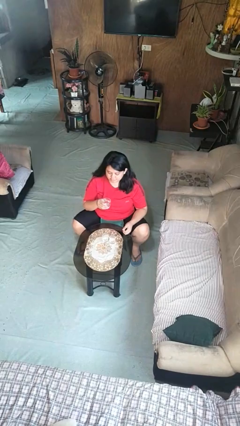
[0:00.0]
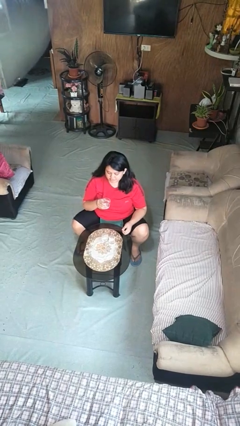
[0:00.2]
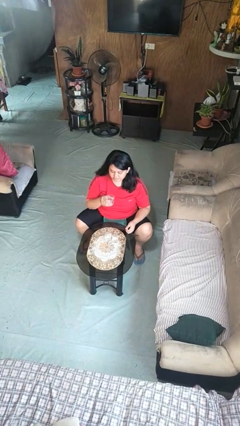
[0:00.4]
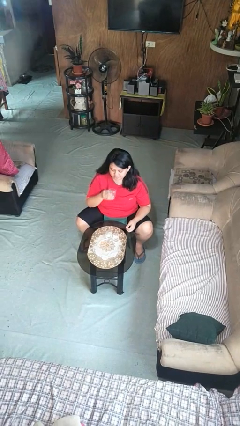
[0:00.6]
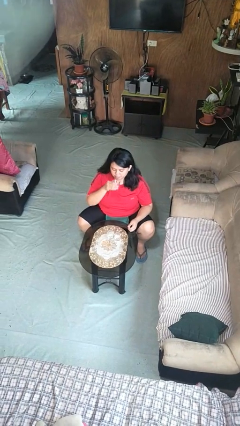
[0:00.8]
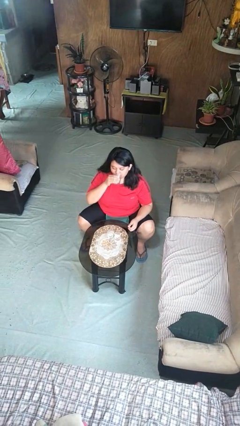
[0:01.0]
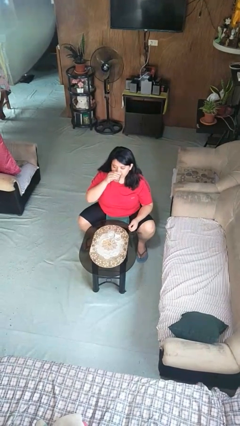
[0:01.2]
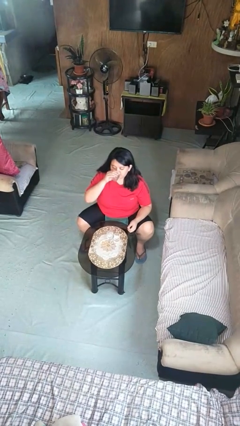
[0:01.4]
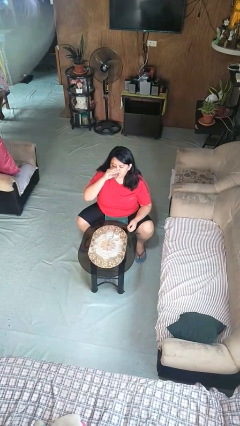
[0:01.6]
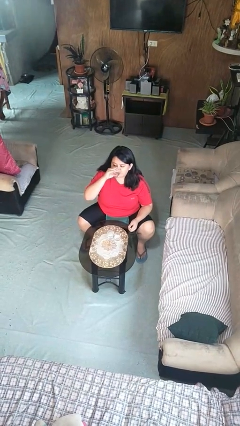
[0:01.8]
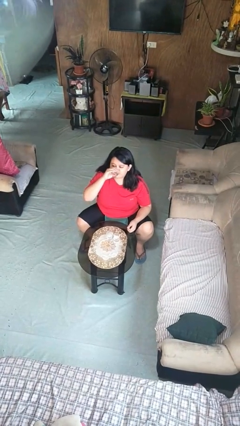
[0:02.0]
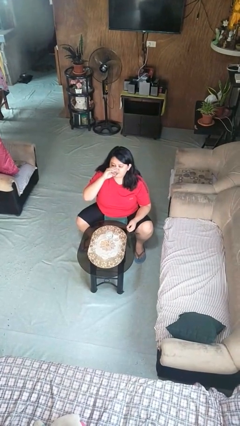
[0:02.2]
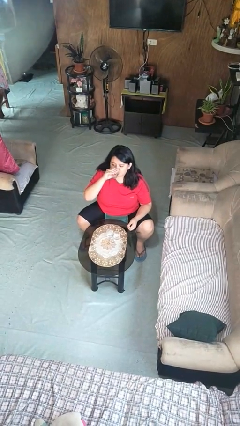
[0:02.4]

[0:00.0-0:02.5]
person drinks from shotglass

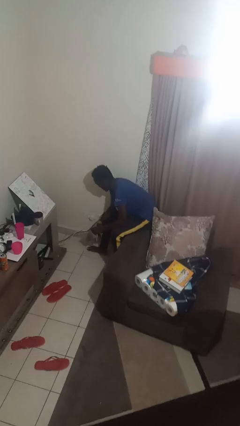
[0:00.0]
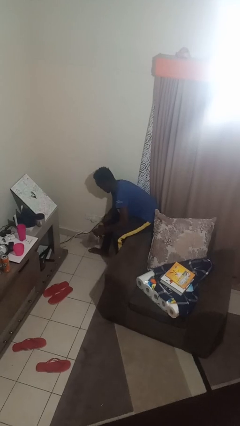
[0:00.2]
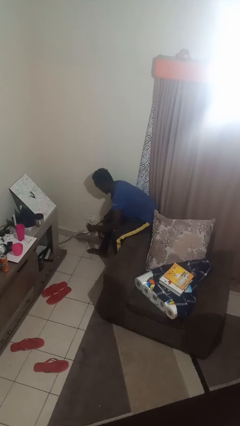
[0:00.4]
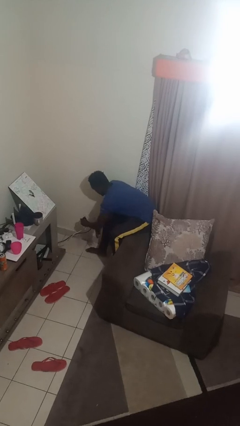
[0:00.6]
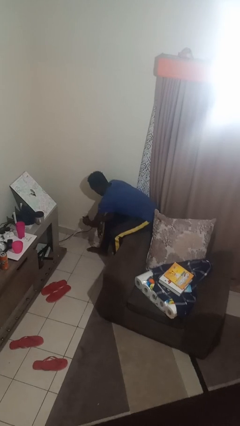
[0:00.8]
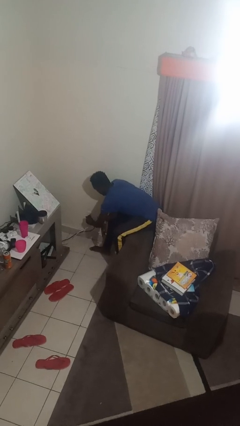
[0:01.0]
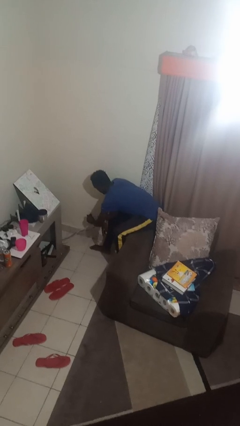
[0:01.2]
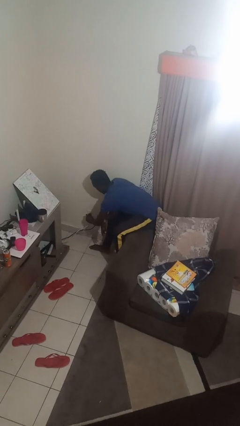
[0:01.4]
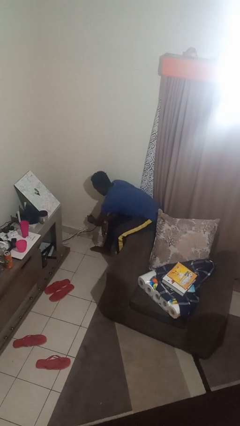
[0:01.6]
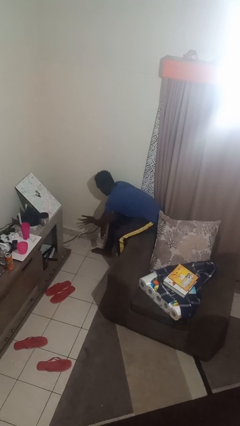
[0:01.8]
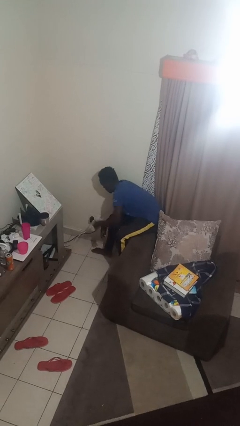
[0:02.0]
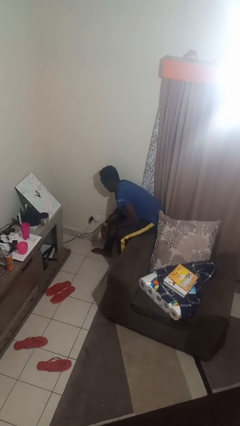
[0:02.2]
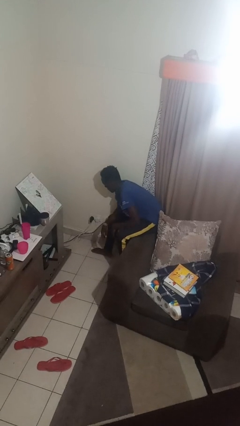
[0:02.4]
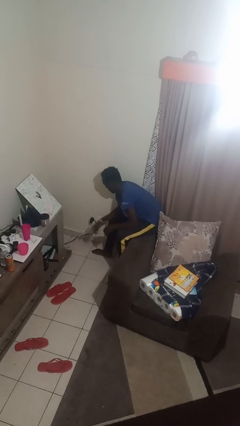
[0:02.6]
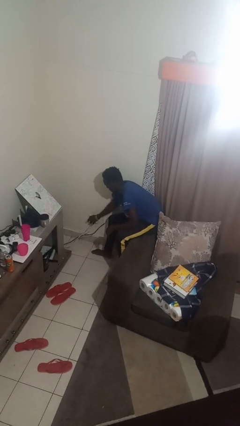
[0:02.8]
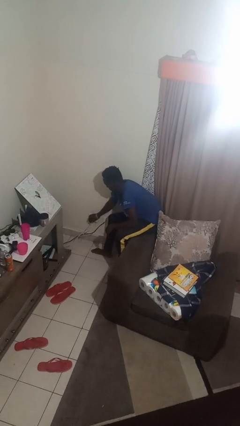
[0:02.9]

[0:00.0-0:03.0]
person plugs into electrical socket

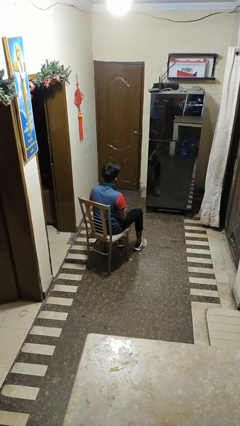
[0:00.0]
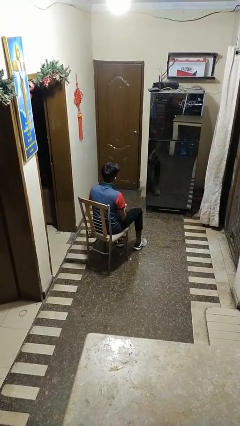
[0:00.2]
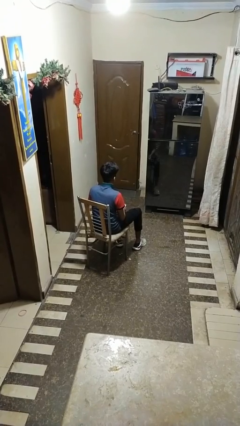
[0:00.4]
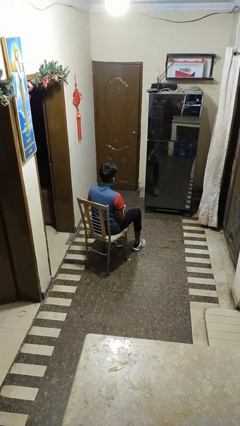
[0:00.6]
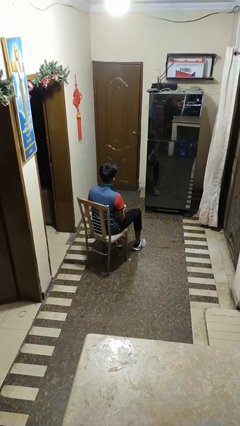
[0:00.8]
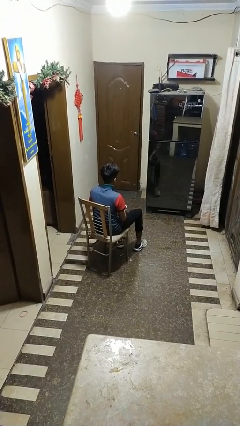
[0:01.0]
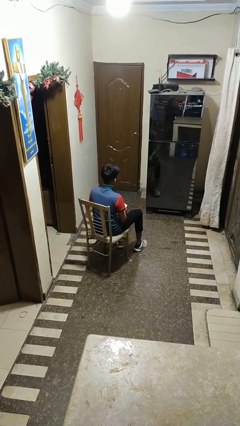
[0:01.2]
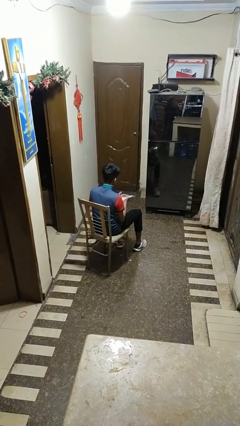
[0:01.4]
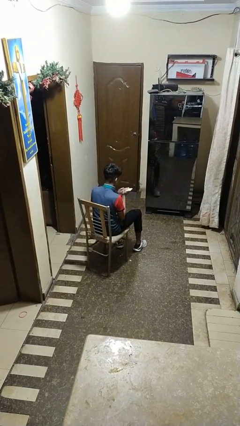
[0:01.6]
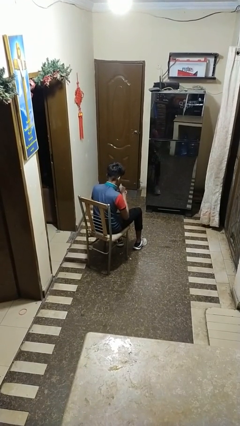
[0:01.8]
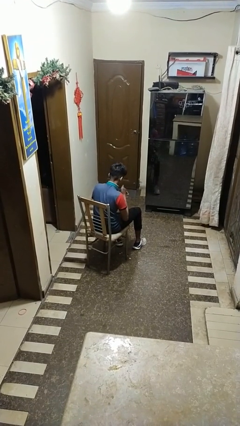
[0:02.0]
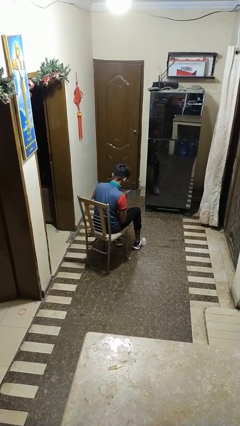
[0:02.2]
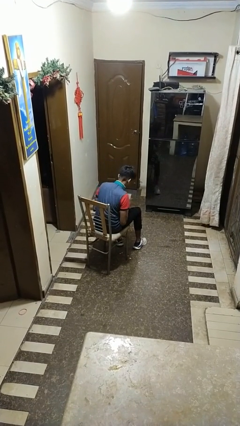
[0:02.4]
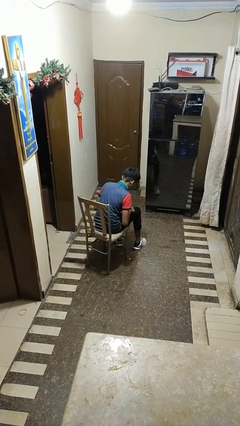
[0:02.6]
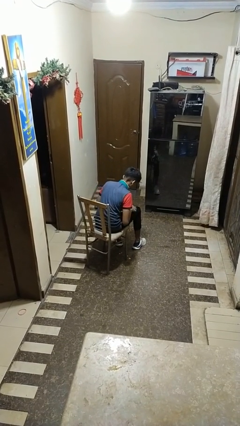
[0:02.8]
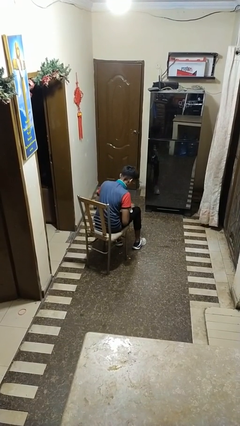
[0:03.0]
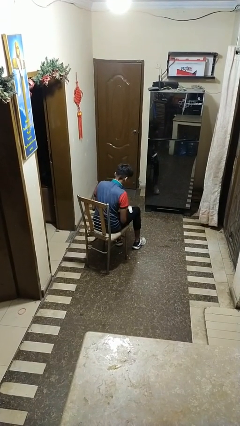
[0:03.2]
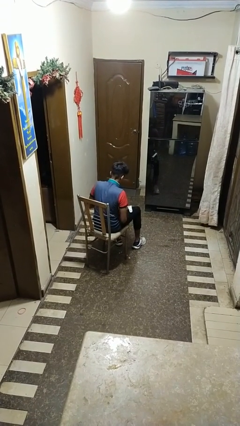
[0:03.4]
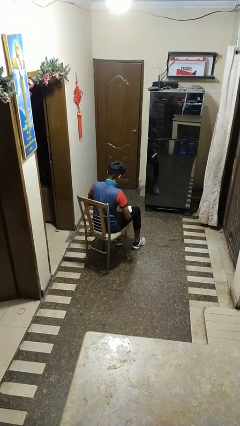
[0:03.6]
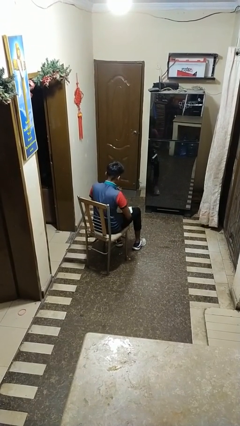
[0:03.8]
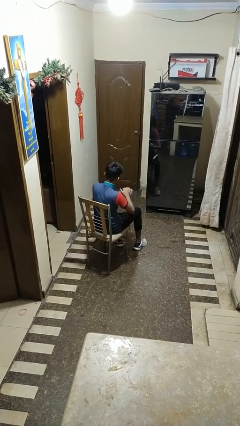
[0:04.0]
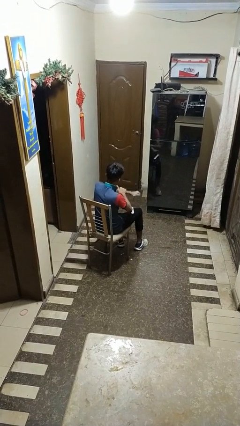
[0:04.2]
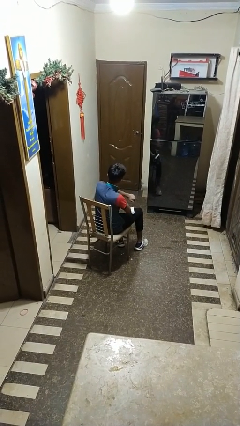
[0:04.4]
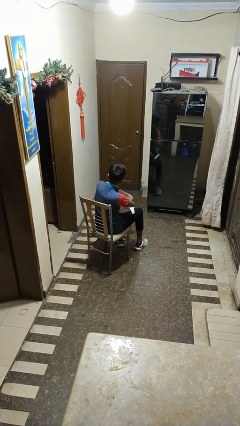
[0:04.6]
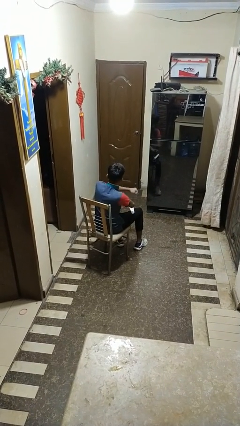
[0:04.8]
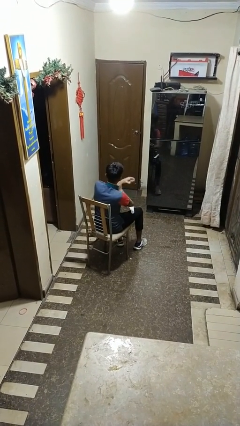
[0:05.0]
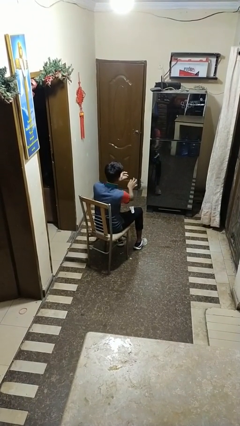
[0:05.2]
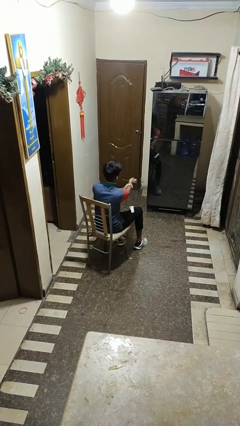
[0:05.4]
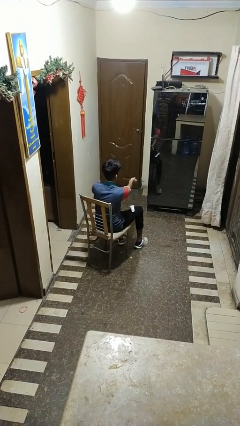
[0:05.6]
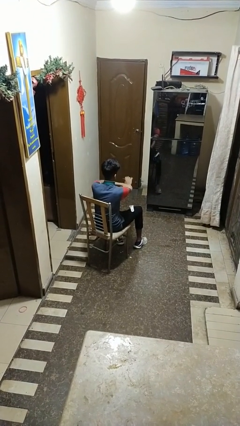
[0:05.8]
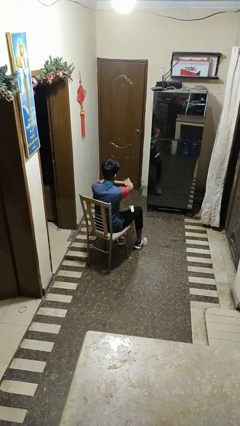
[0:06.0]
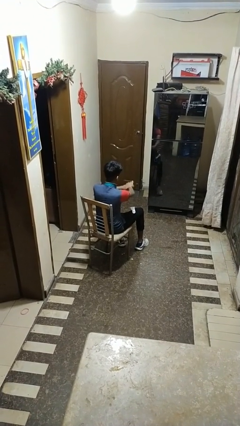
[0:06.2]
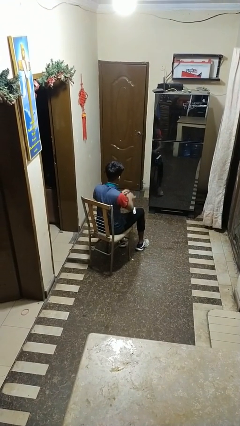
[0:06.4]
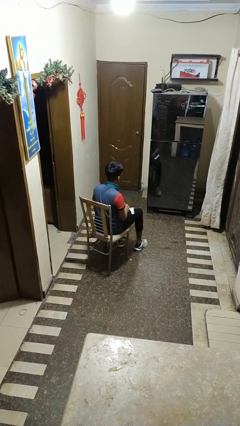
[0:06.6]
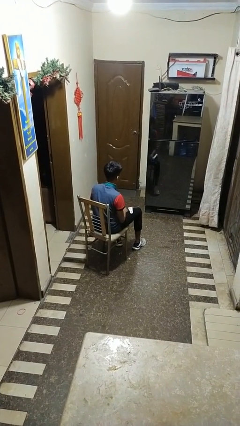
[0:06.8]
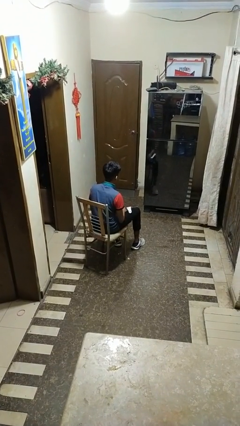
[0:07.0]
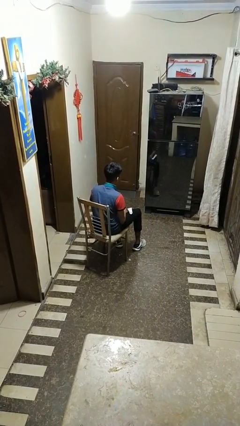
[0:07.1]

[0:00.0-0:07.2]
person applies facial moisturizer

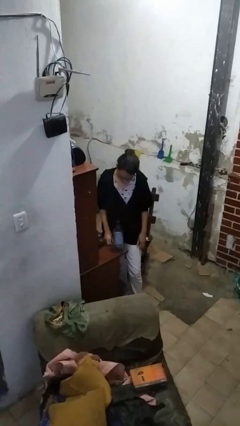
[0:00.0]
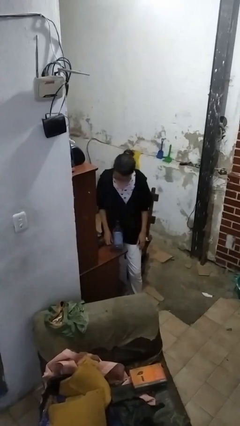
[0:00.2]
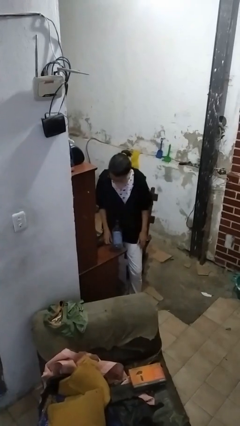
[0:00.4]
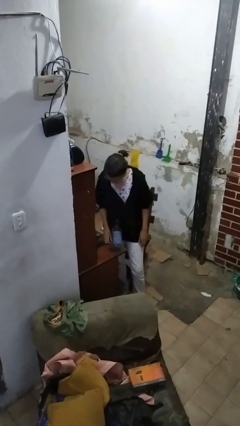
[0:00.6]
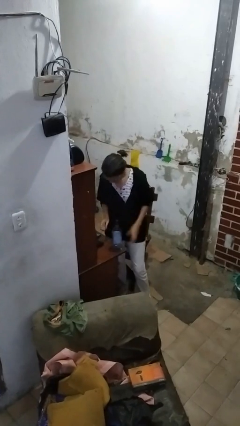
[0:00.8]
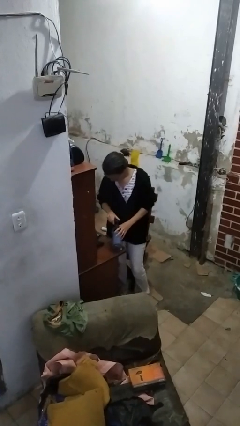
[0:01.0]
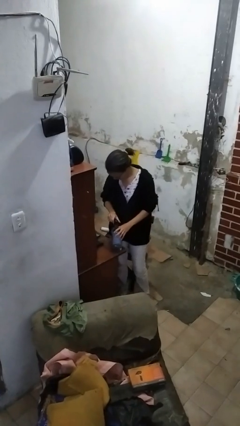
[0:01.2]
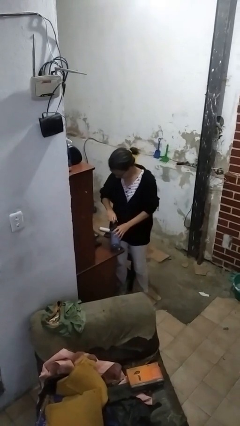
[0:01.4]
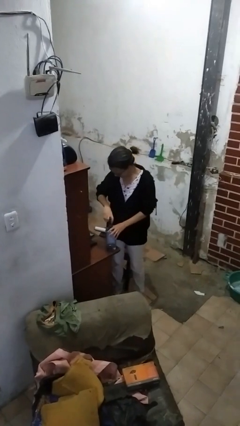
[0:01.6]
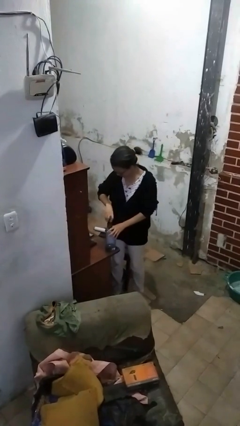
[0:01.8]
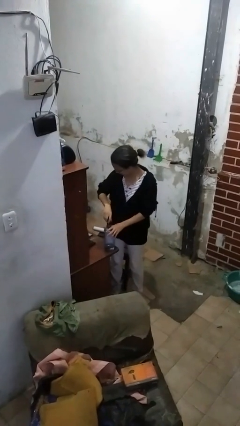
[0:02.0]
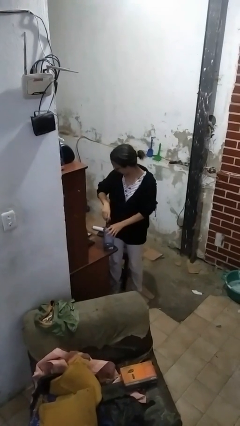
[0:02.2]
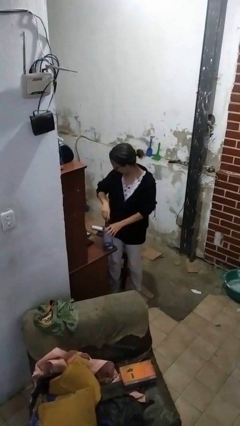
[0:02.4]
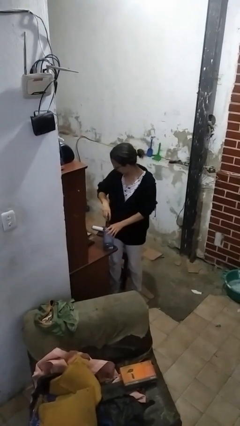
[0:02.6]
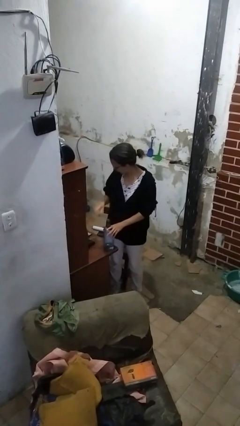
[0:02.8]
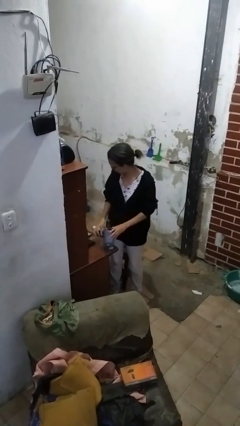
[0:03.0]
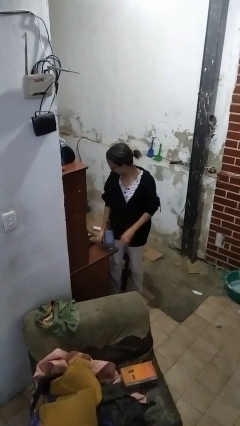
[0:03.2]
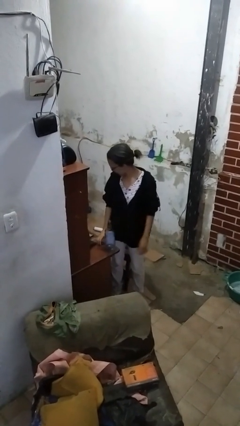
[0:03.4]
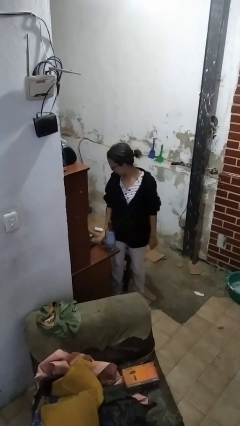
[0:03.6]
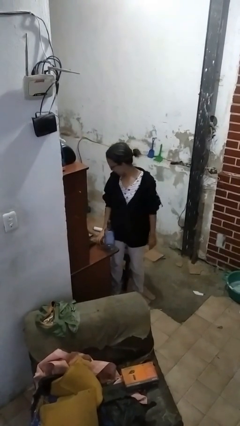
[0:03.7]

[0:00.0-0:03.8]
person unscrews lid from bottle

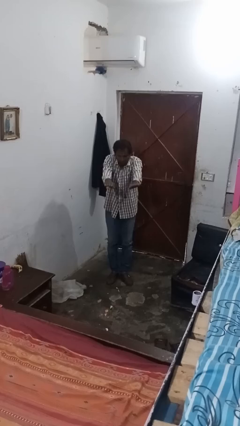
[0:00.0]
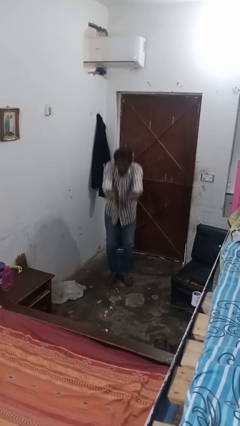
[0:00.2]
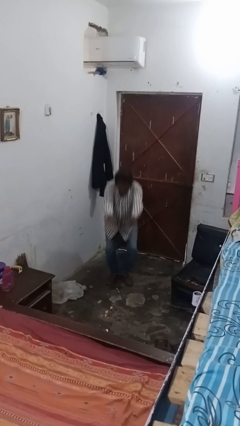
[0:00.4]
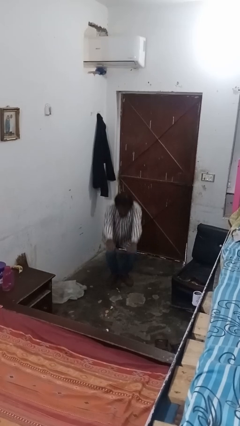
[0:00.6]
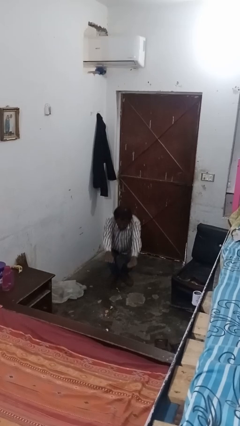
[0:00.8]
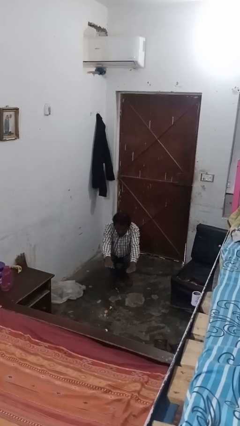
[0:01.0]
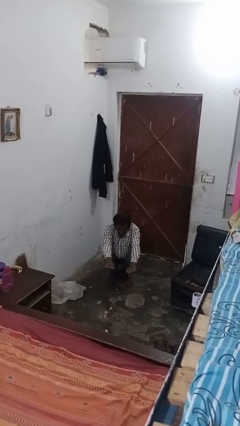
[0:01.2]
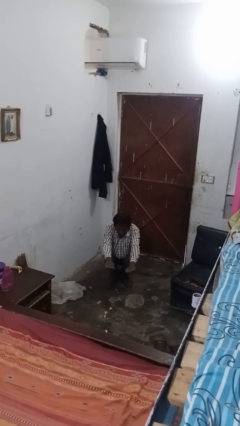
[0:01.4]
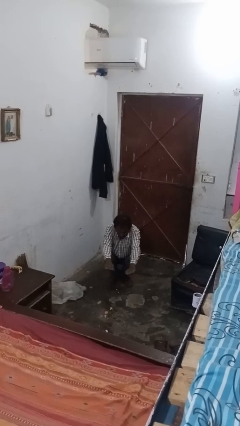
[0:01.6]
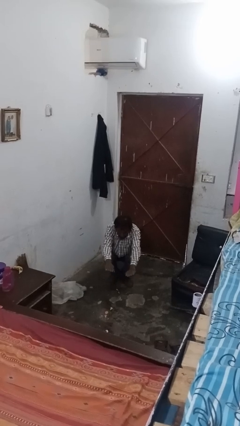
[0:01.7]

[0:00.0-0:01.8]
person squats
